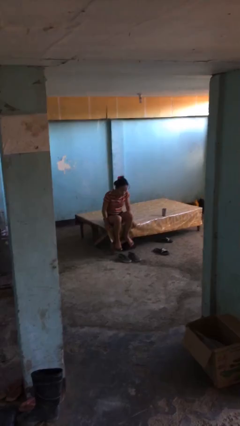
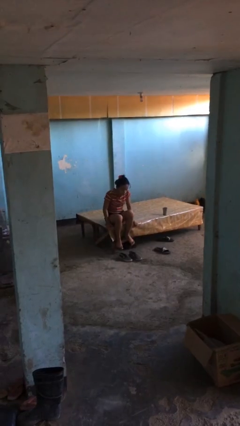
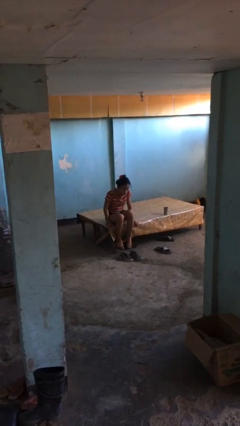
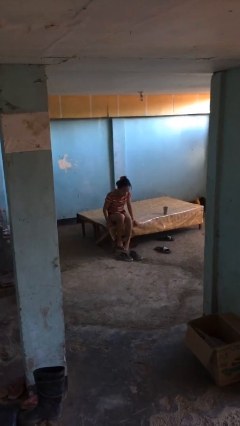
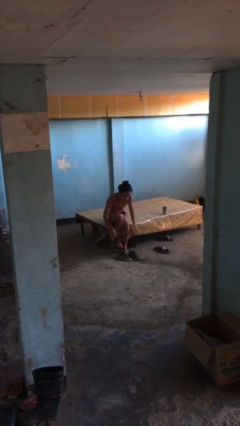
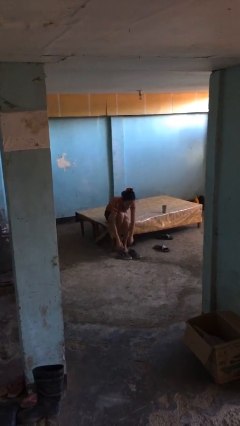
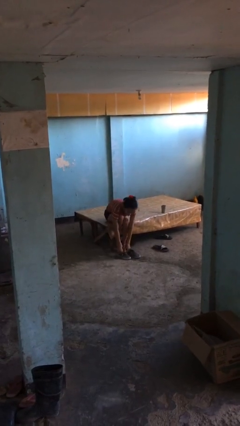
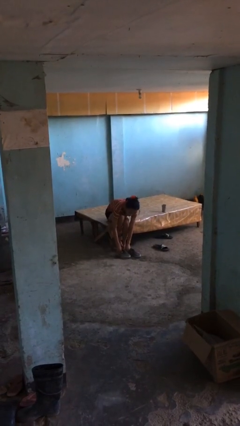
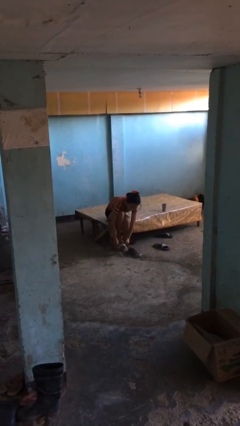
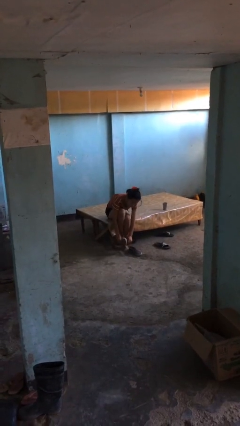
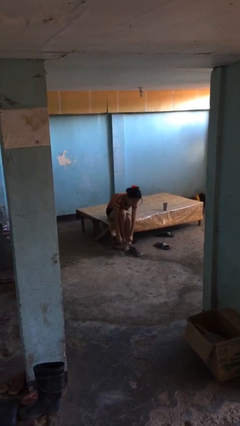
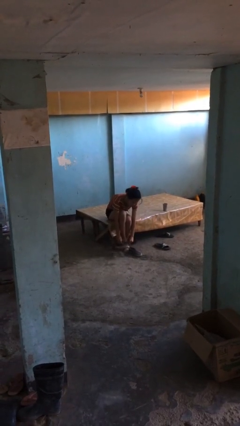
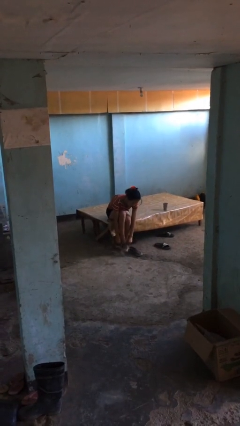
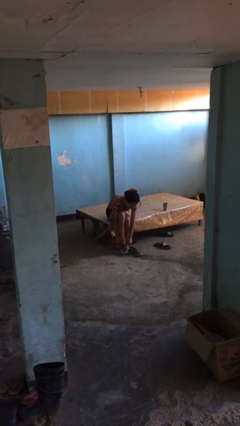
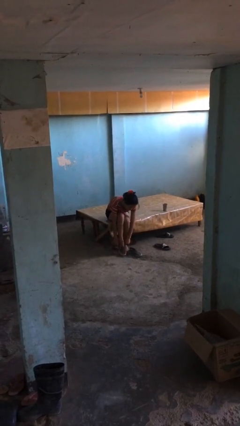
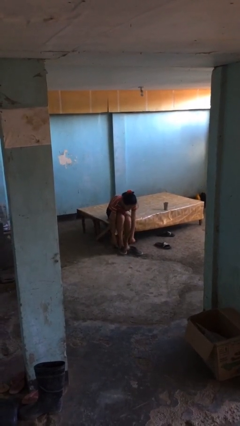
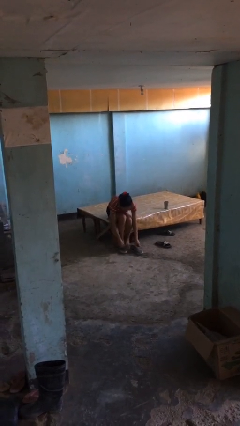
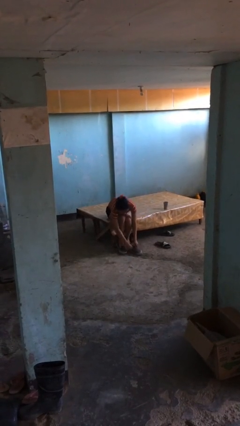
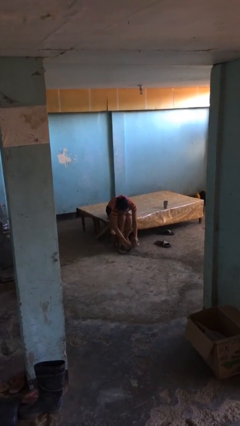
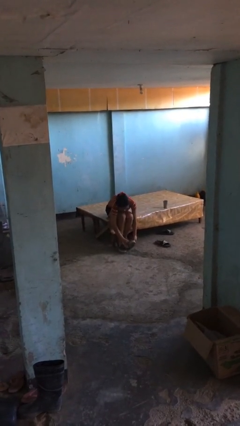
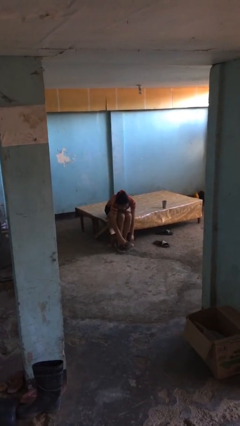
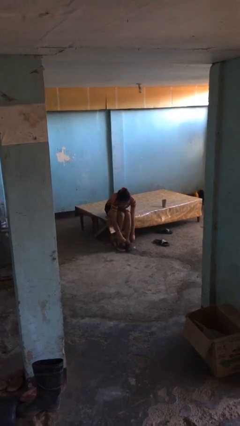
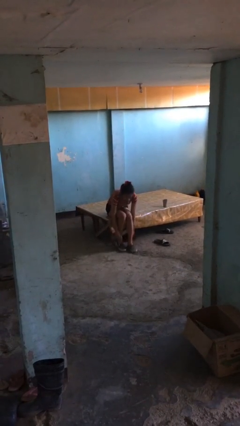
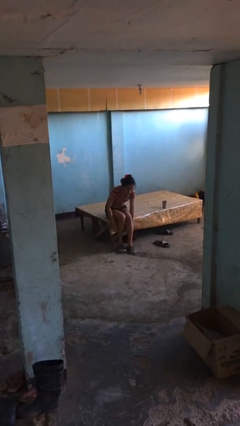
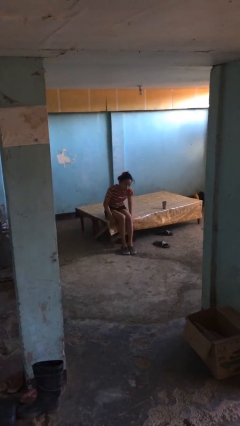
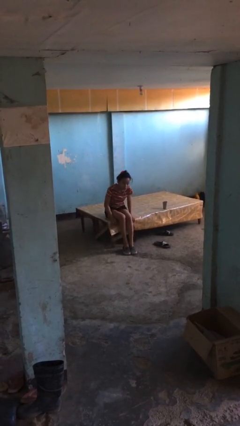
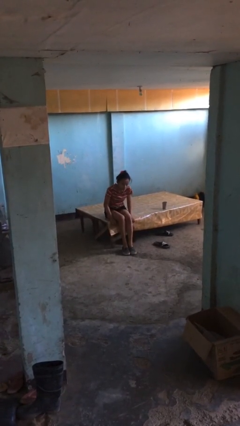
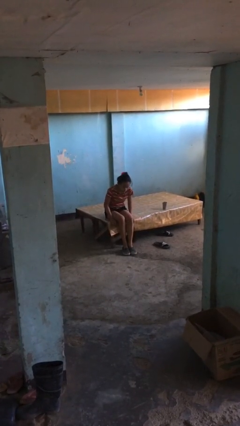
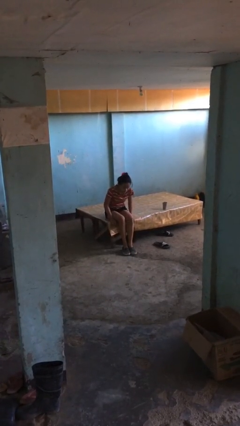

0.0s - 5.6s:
person puts on shoes

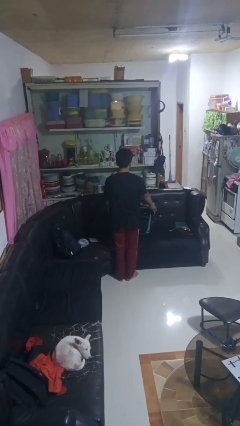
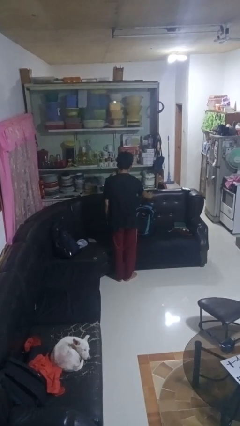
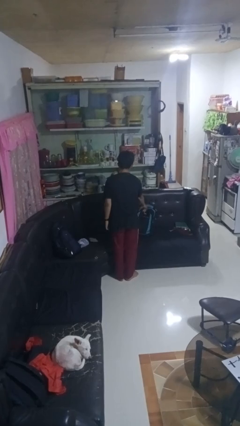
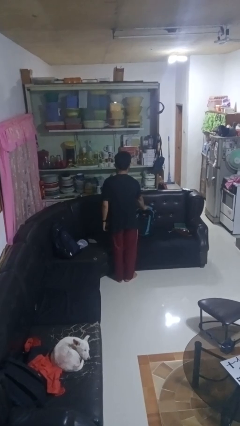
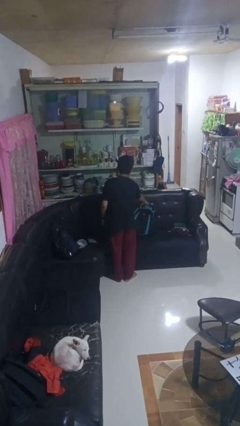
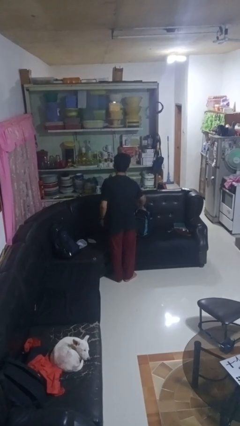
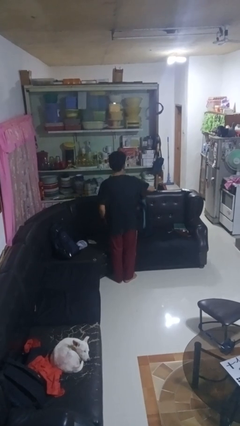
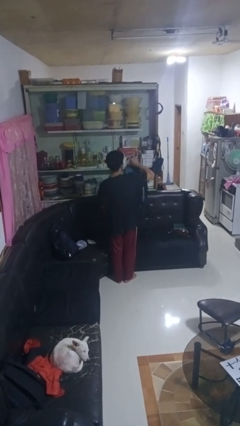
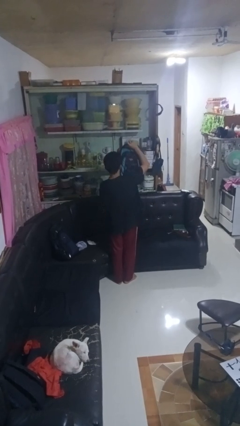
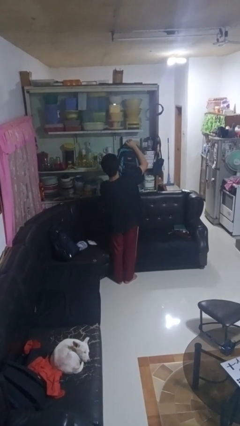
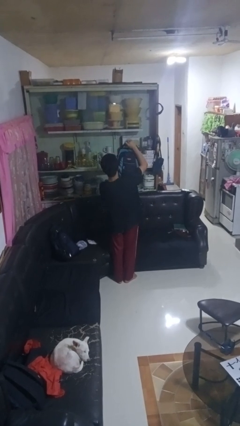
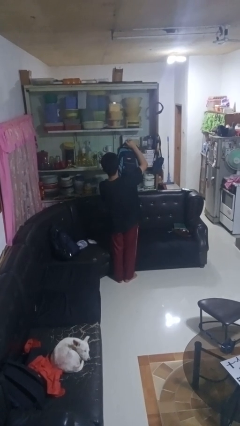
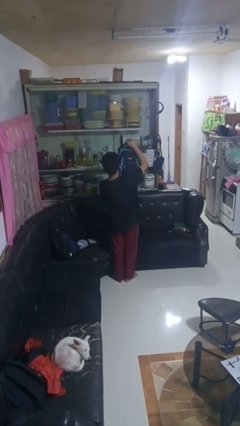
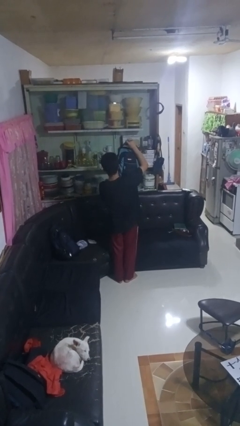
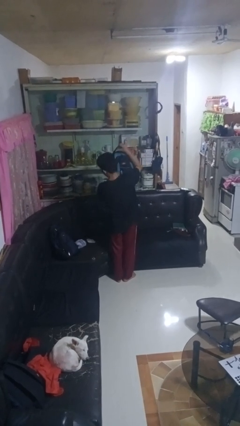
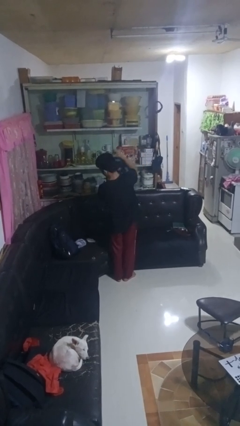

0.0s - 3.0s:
person picks up object from couch

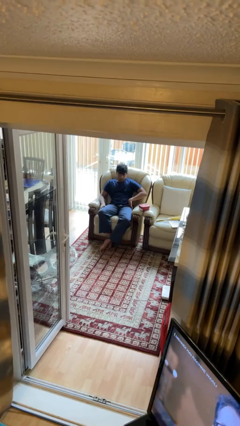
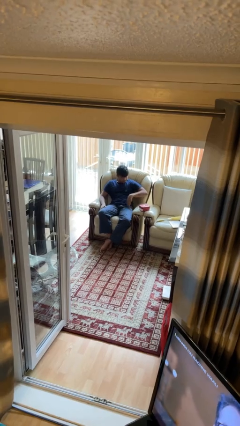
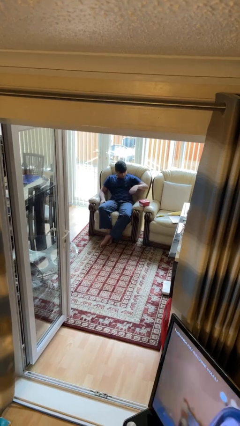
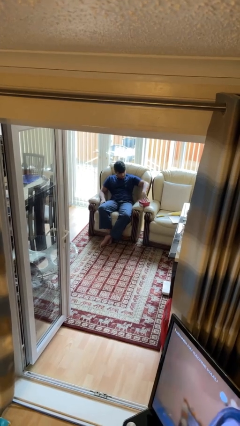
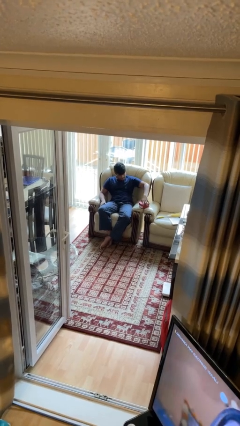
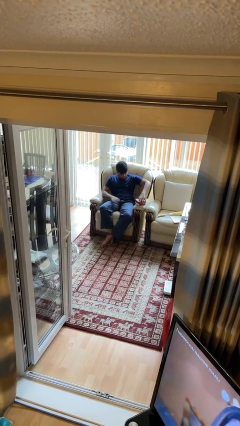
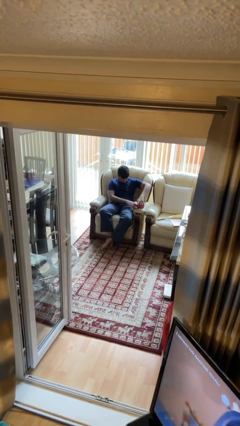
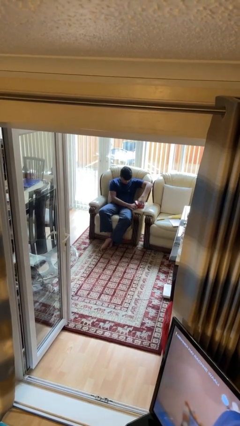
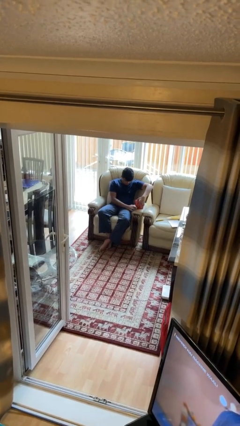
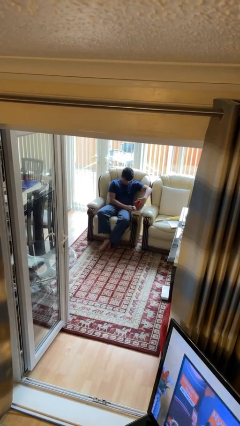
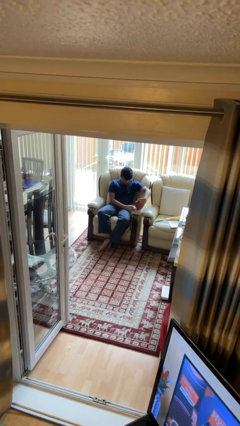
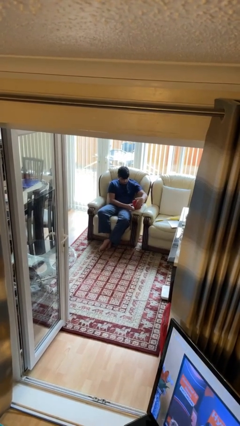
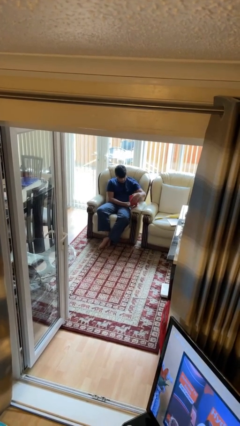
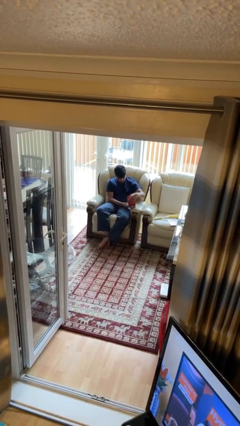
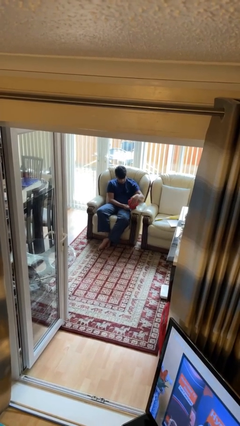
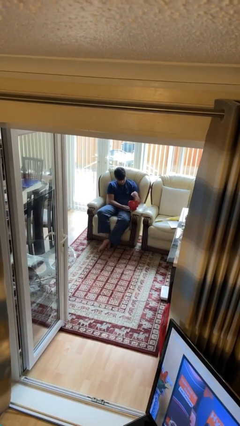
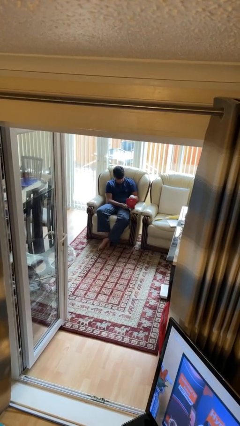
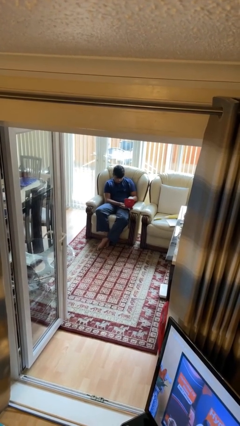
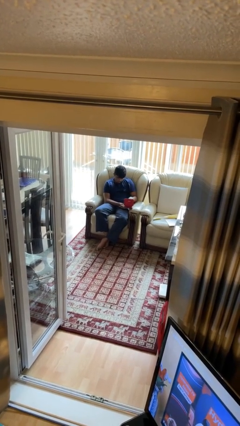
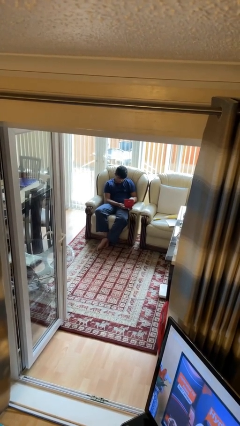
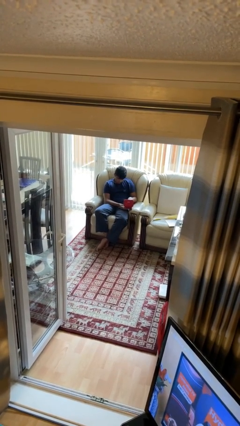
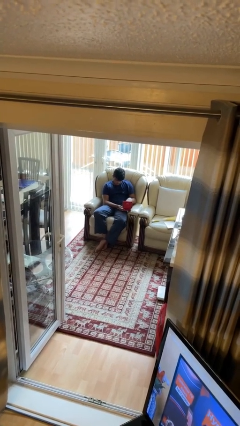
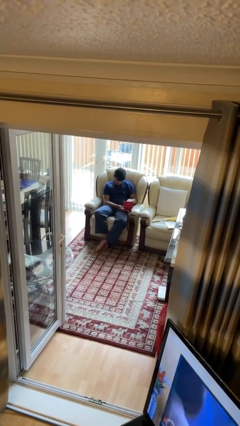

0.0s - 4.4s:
person opens jewelry box

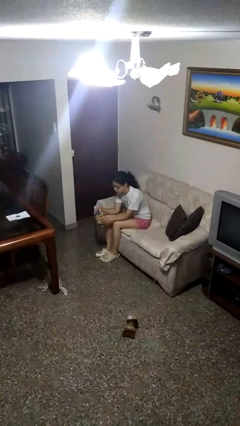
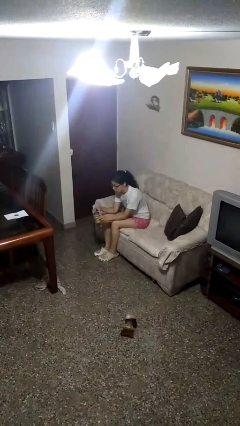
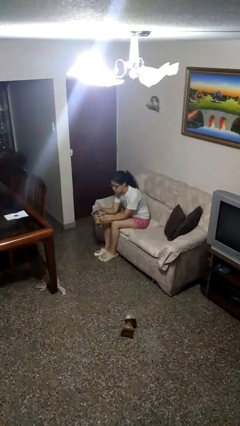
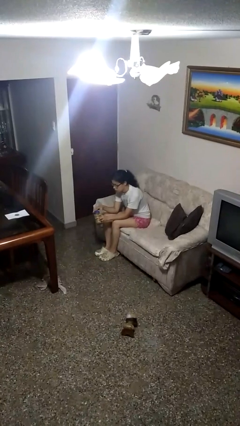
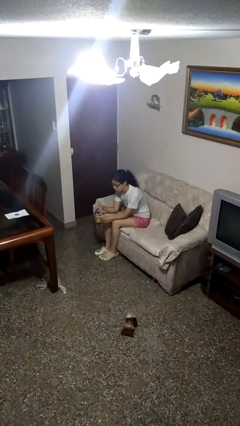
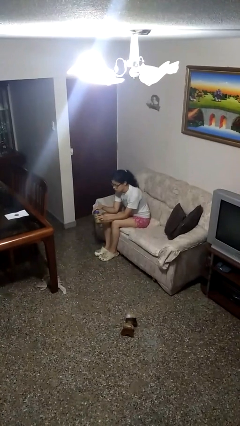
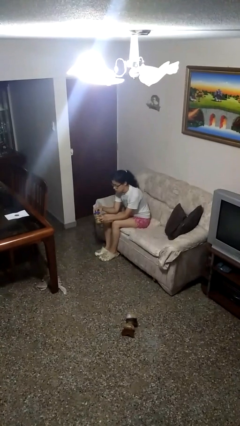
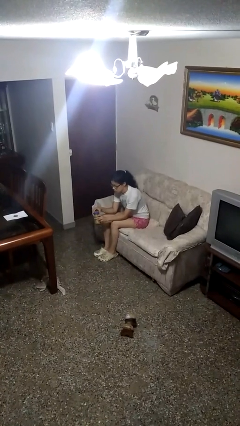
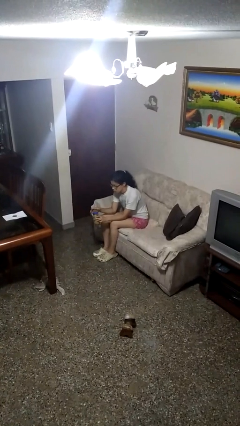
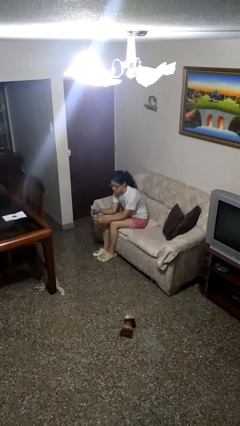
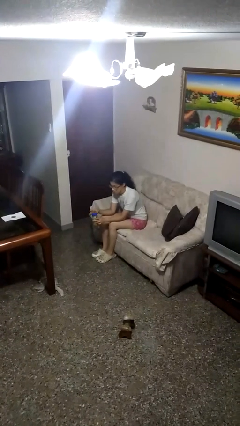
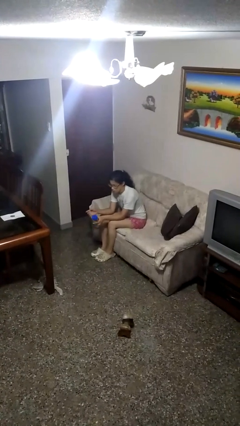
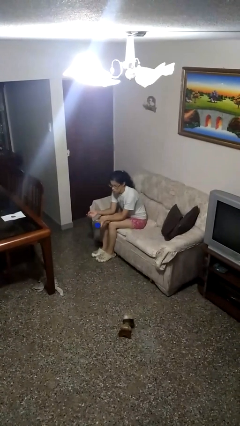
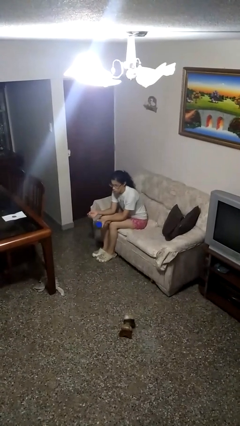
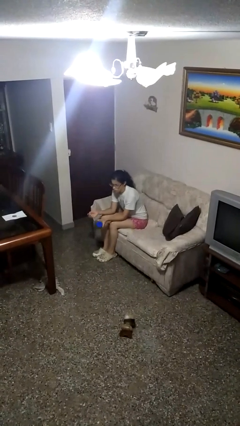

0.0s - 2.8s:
person closes jar

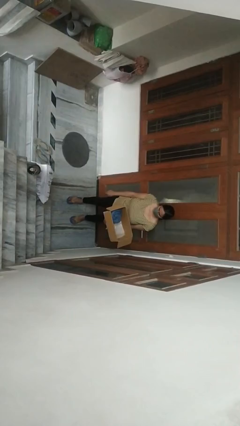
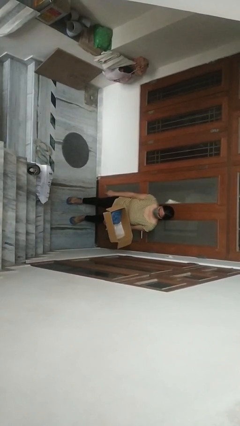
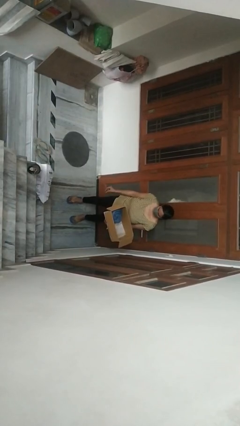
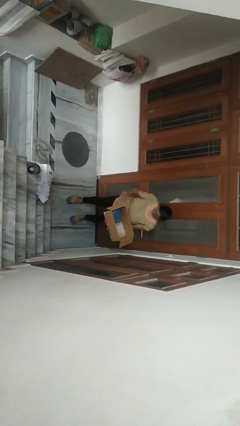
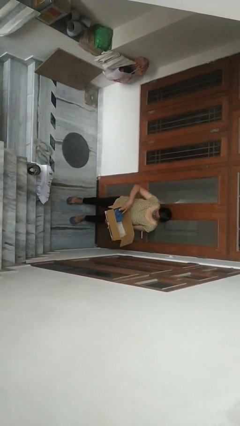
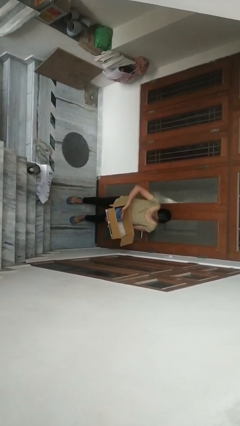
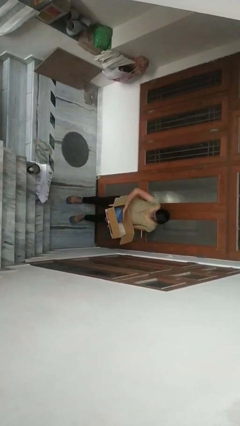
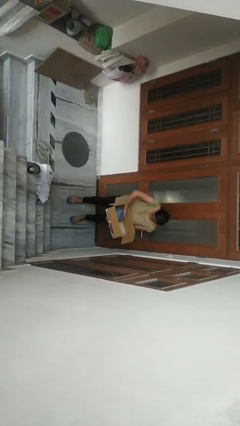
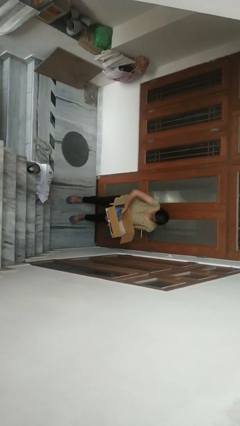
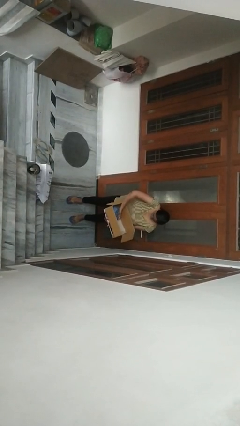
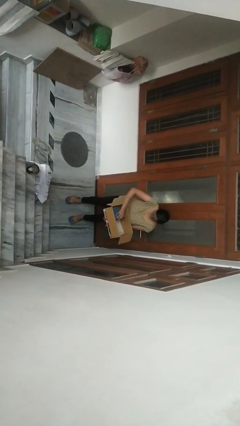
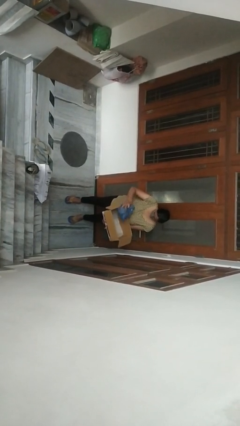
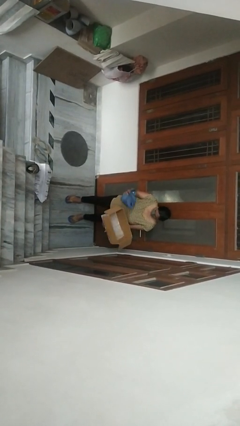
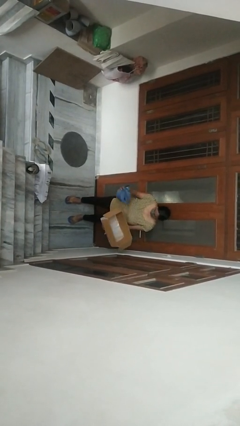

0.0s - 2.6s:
person takes object from box
